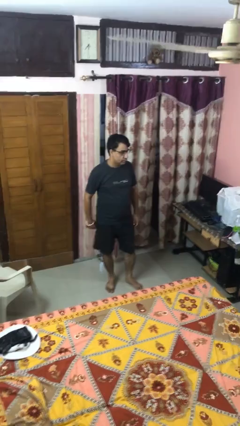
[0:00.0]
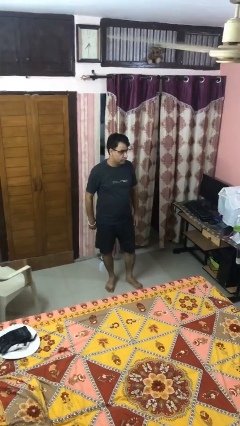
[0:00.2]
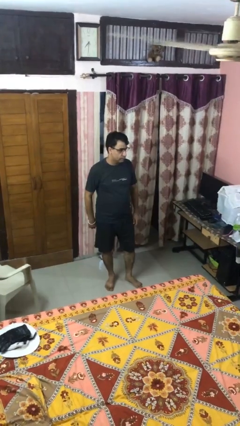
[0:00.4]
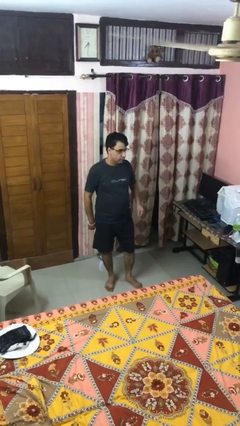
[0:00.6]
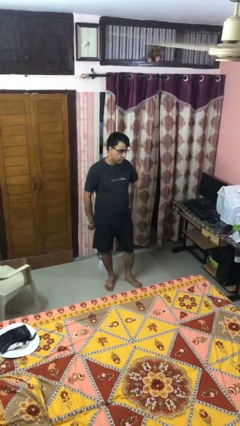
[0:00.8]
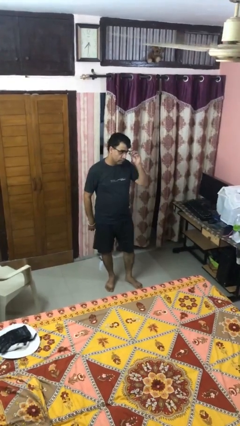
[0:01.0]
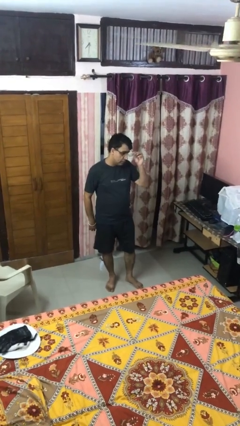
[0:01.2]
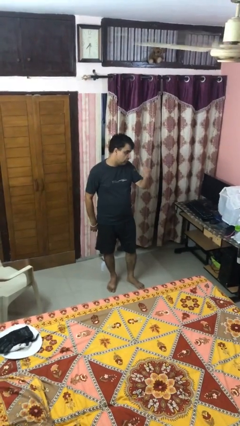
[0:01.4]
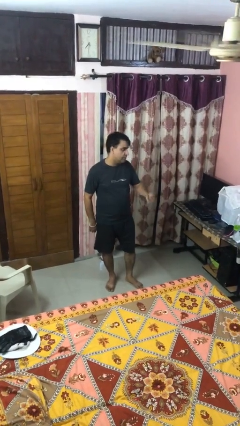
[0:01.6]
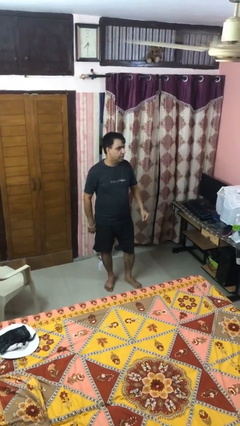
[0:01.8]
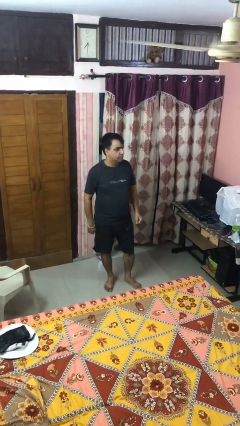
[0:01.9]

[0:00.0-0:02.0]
person takes off glasses

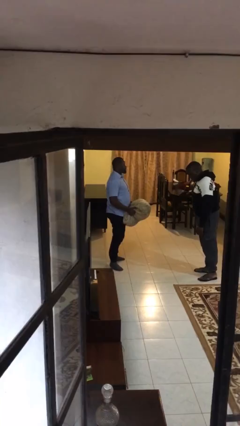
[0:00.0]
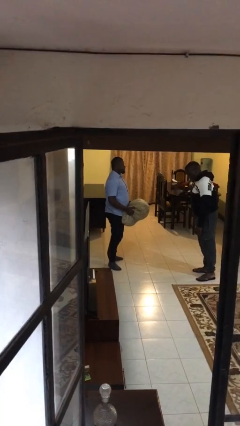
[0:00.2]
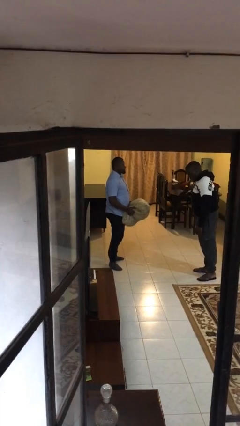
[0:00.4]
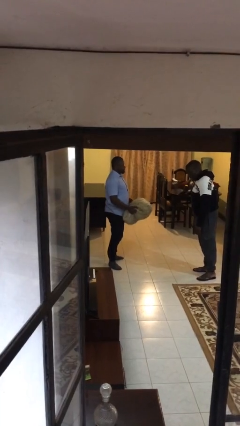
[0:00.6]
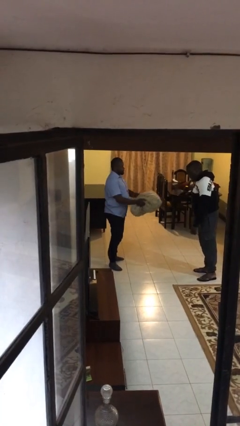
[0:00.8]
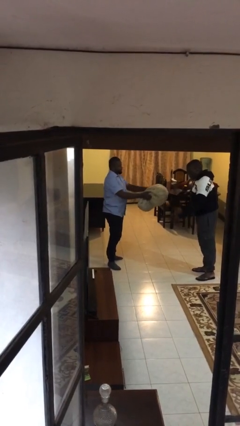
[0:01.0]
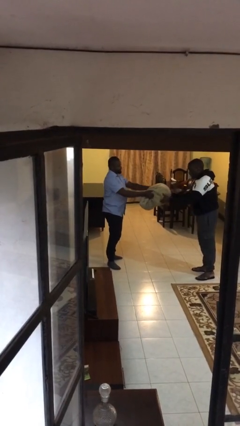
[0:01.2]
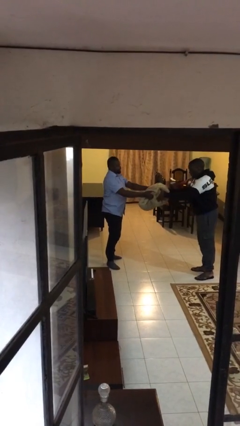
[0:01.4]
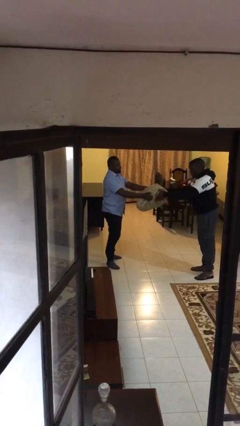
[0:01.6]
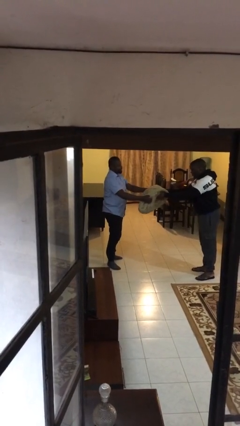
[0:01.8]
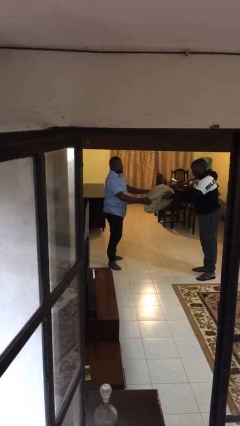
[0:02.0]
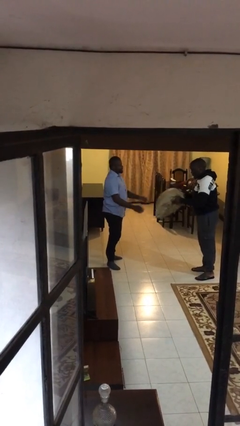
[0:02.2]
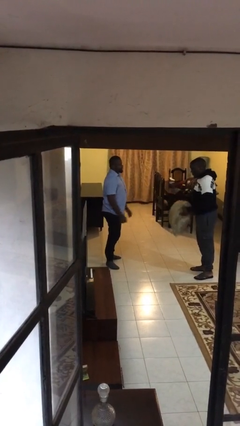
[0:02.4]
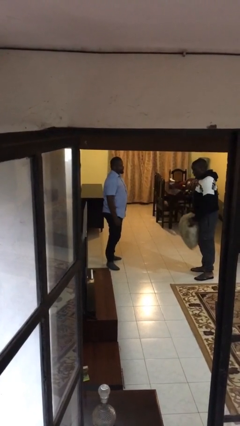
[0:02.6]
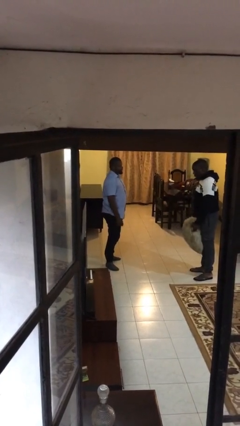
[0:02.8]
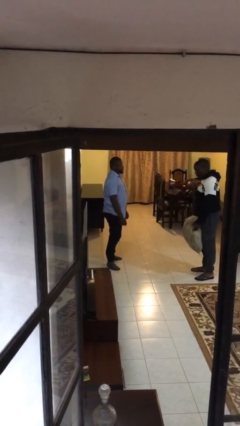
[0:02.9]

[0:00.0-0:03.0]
person transfers object to person

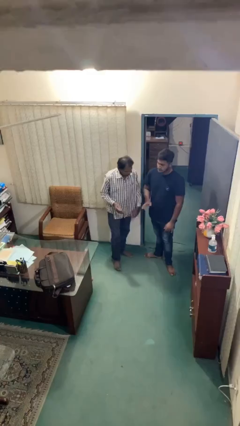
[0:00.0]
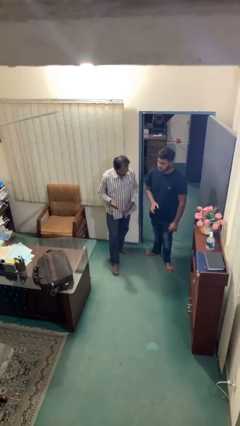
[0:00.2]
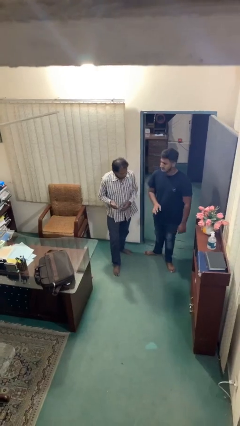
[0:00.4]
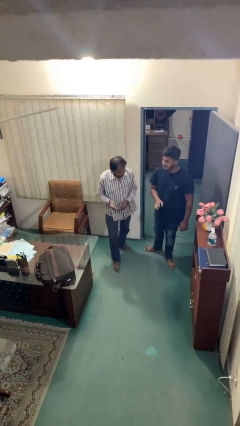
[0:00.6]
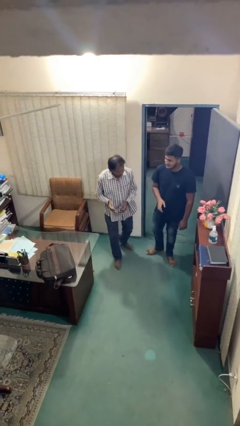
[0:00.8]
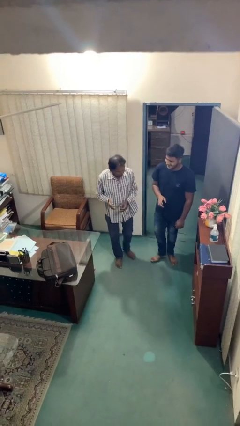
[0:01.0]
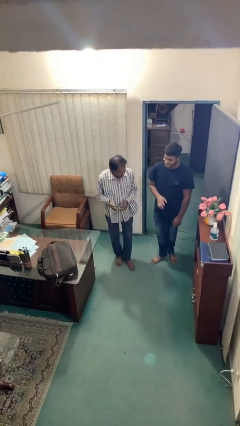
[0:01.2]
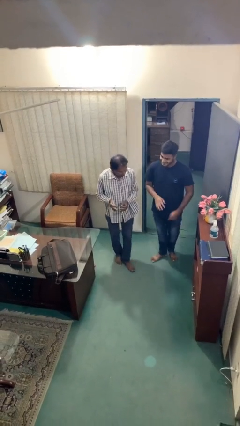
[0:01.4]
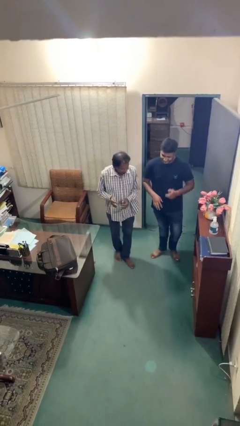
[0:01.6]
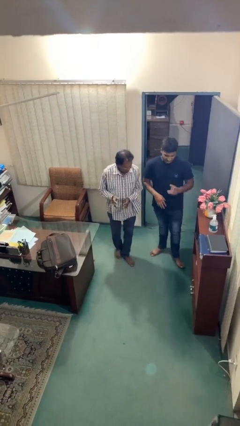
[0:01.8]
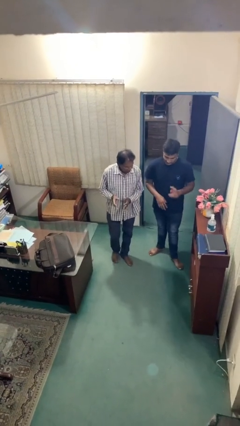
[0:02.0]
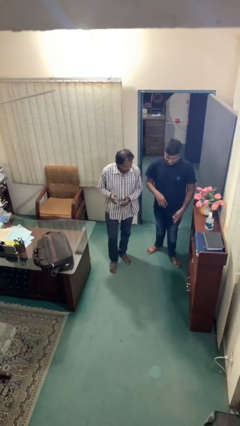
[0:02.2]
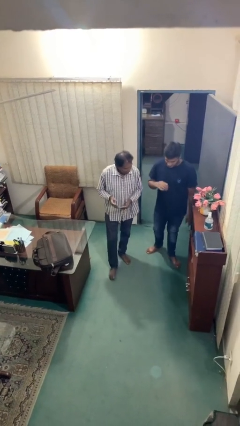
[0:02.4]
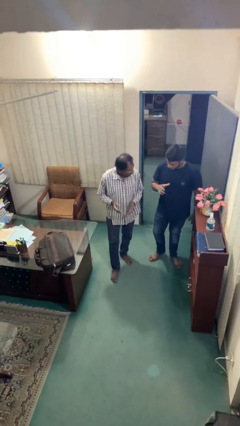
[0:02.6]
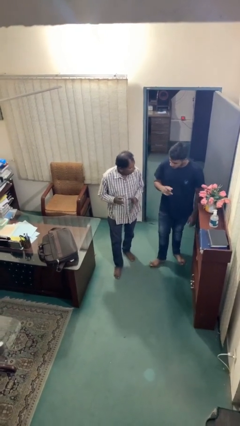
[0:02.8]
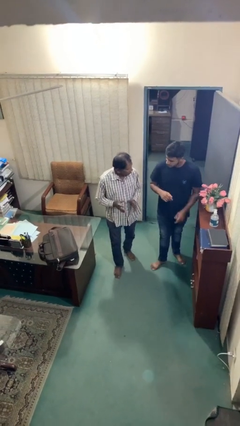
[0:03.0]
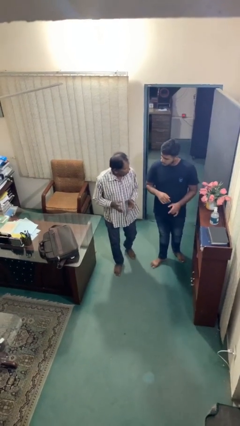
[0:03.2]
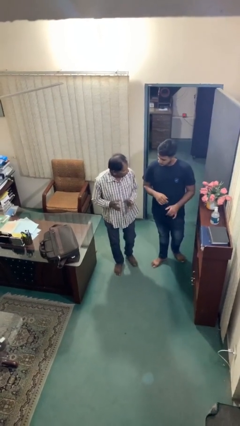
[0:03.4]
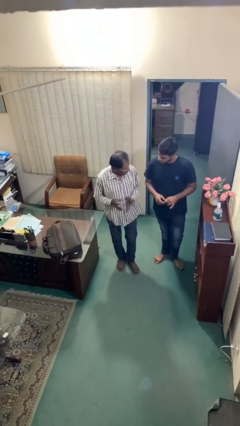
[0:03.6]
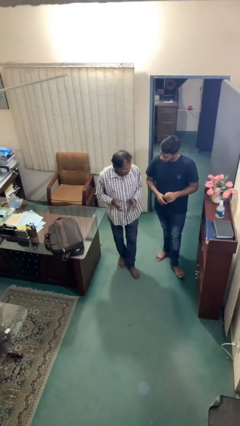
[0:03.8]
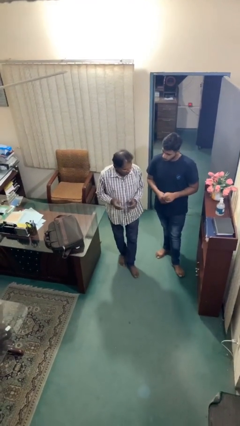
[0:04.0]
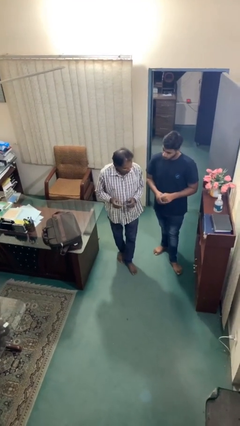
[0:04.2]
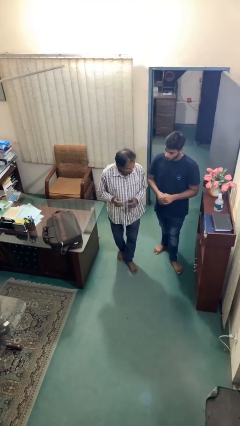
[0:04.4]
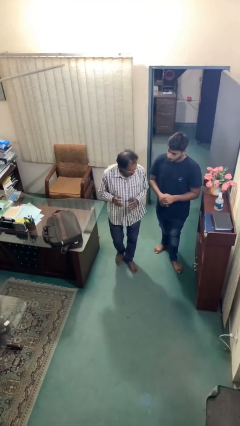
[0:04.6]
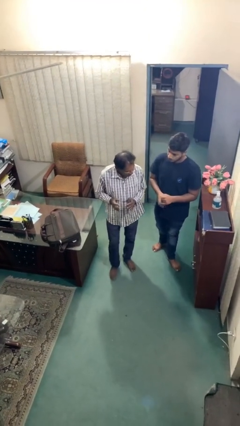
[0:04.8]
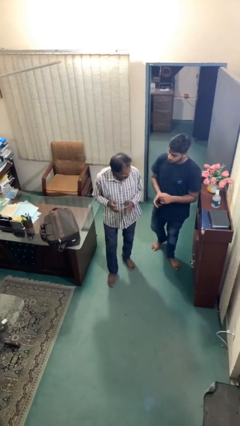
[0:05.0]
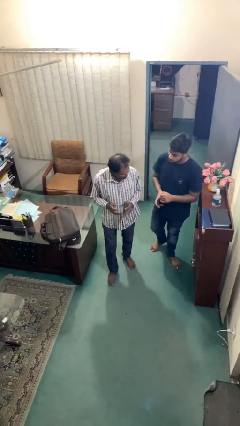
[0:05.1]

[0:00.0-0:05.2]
person talks to person

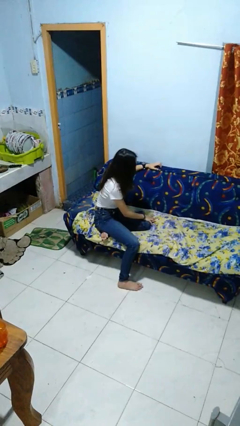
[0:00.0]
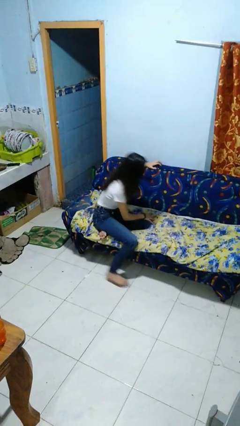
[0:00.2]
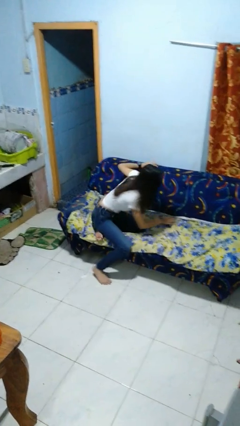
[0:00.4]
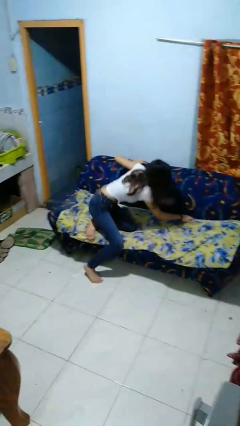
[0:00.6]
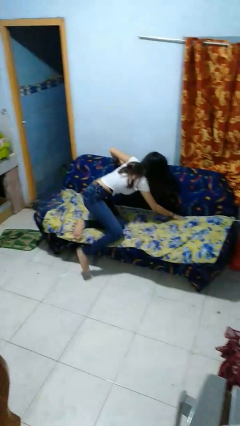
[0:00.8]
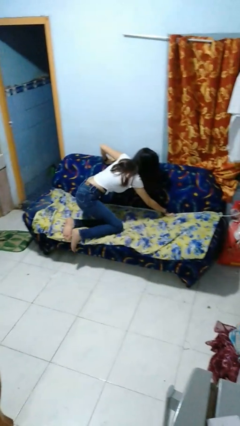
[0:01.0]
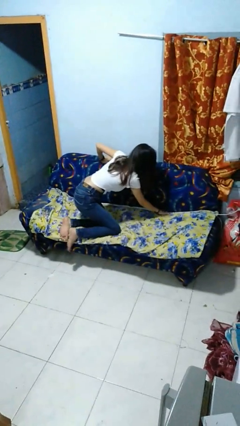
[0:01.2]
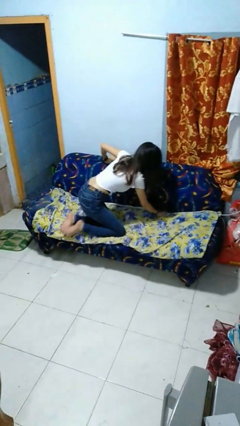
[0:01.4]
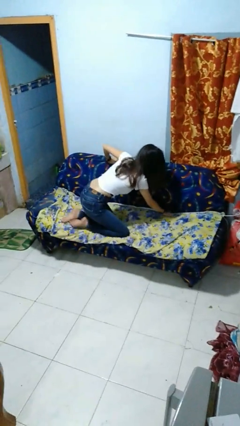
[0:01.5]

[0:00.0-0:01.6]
person searches in couch

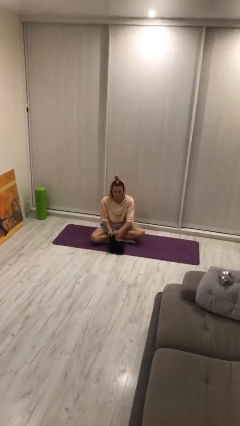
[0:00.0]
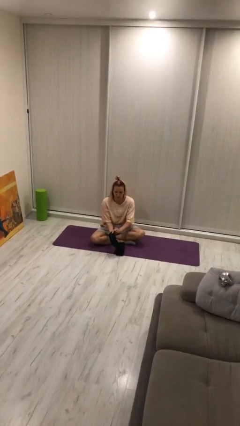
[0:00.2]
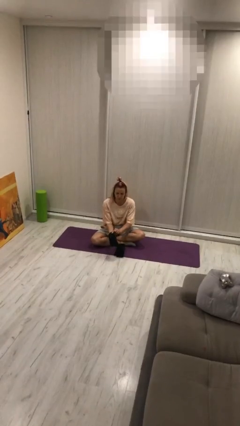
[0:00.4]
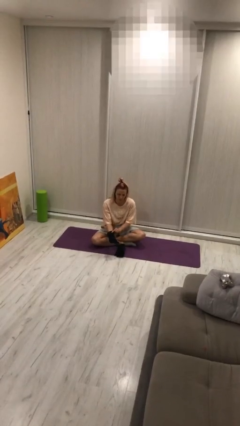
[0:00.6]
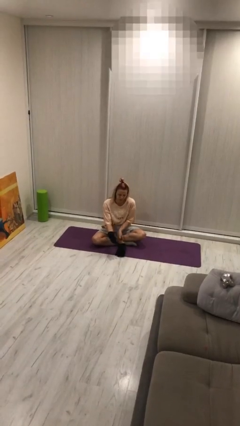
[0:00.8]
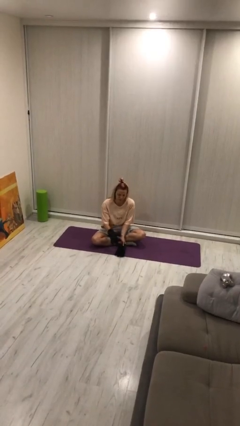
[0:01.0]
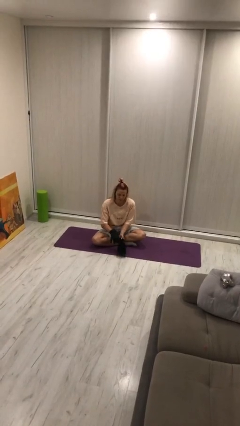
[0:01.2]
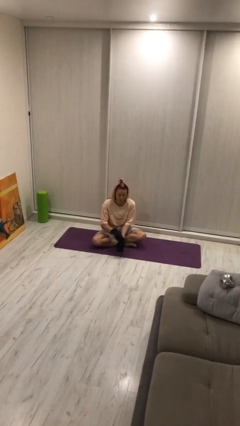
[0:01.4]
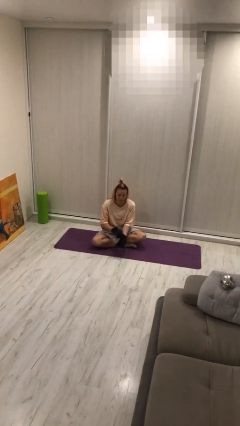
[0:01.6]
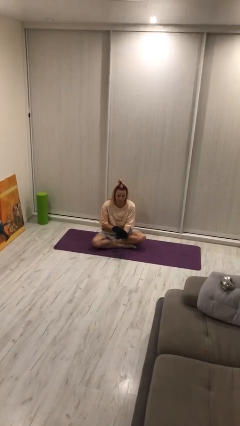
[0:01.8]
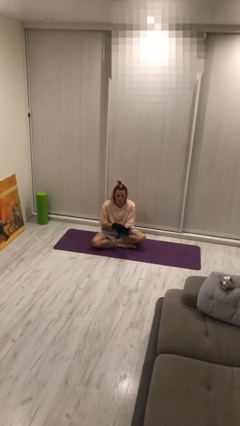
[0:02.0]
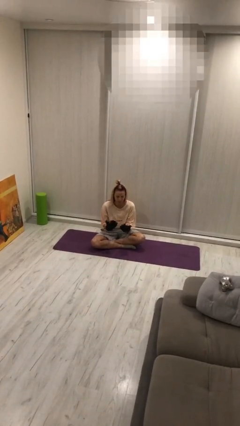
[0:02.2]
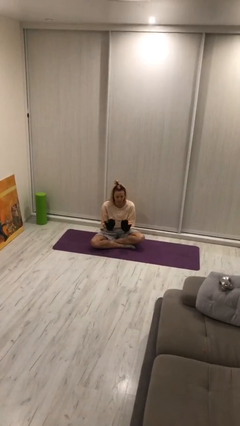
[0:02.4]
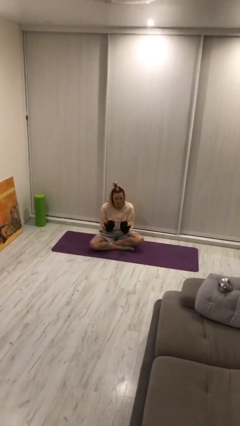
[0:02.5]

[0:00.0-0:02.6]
person puts on gloves

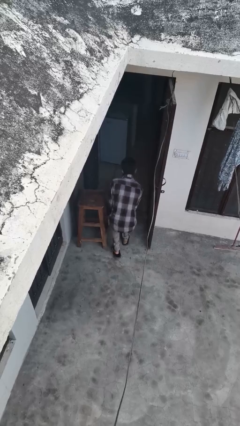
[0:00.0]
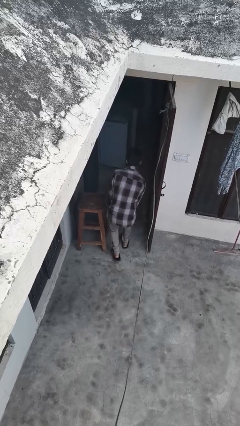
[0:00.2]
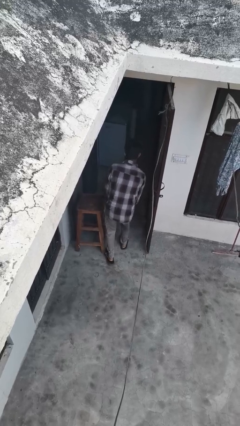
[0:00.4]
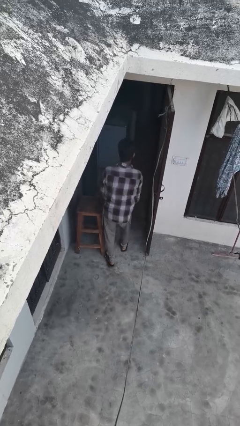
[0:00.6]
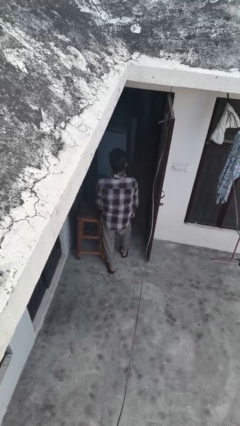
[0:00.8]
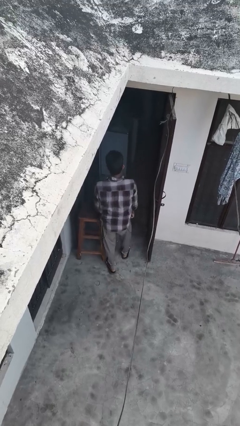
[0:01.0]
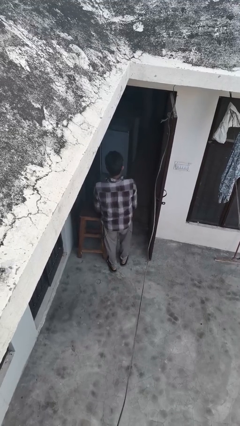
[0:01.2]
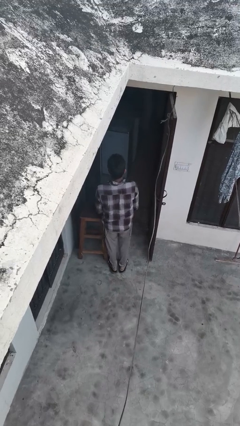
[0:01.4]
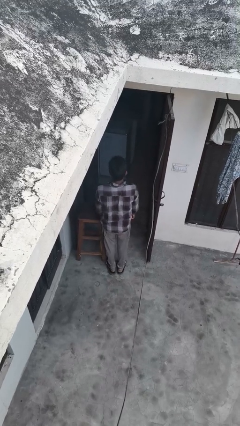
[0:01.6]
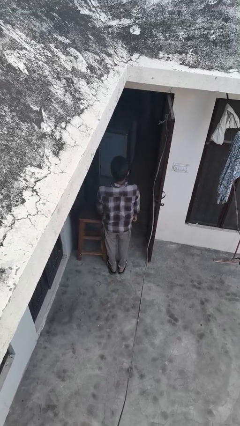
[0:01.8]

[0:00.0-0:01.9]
person stands up from floor

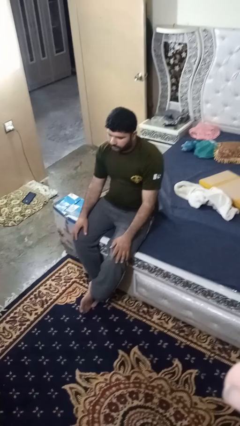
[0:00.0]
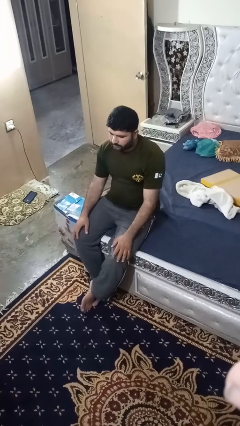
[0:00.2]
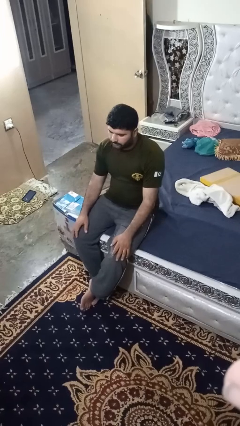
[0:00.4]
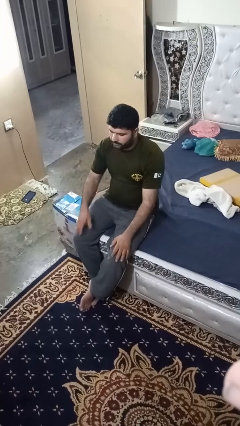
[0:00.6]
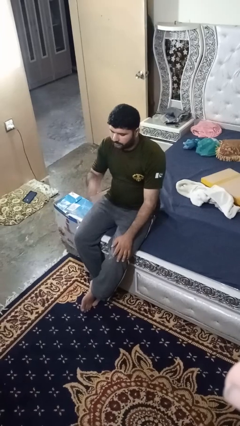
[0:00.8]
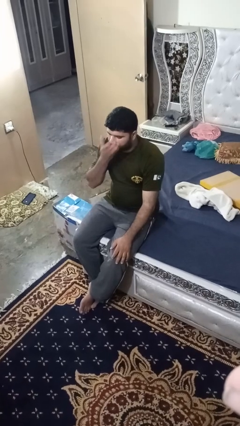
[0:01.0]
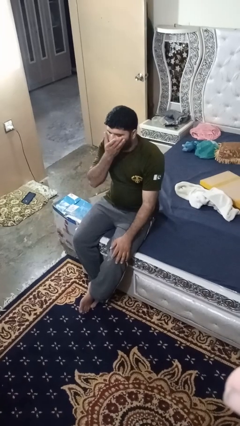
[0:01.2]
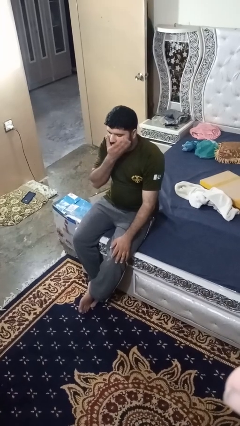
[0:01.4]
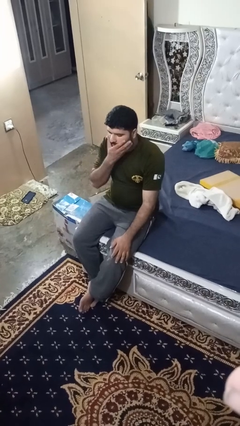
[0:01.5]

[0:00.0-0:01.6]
person strokes chin
